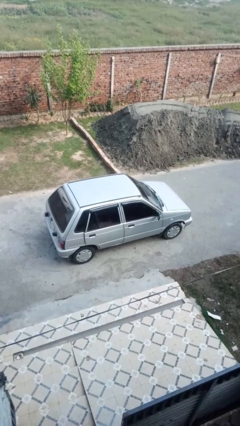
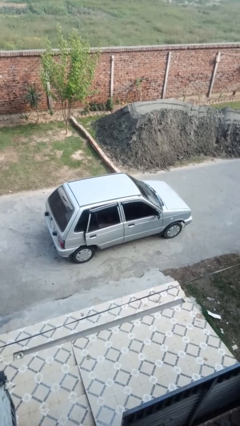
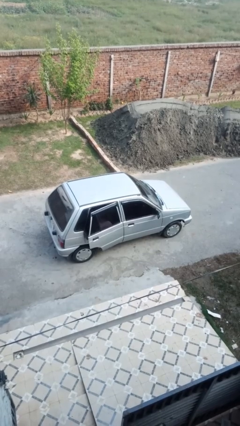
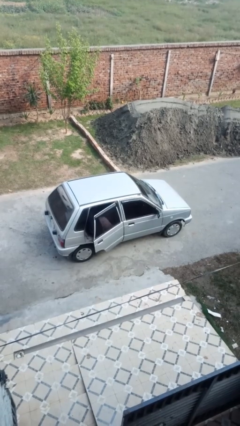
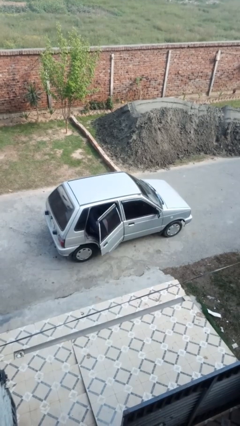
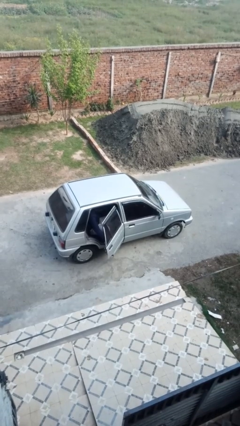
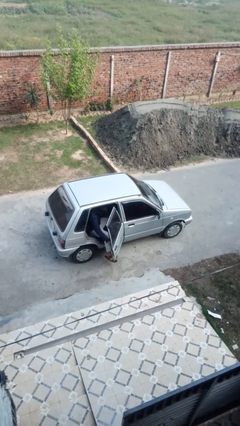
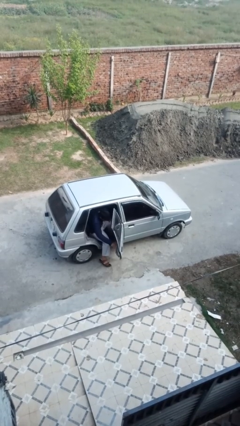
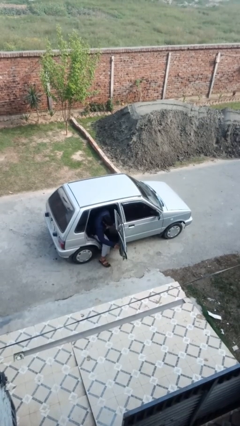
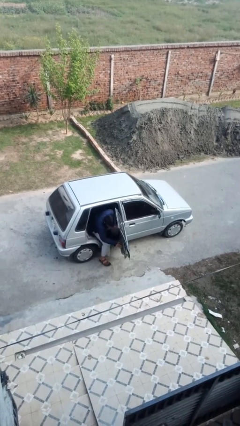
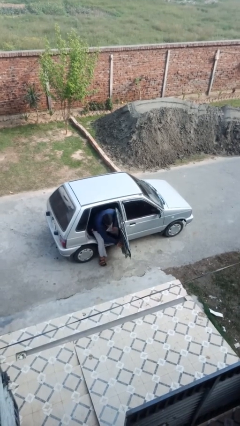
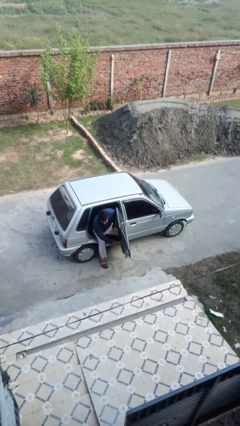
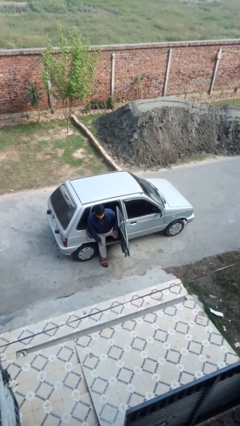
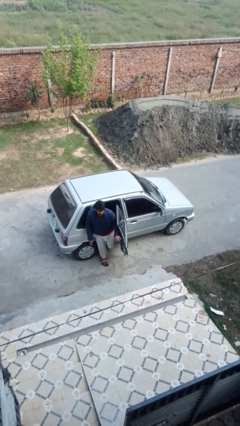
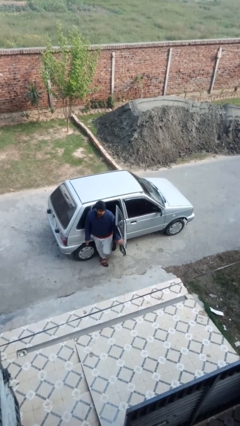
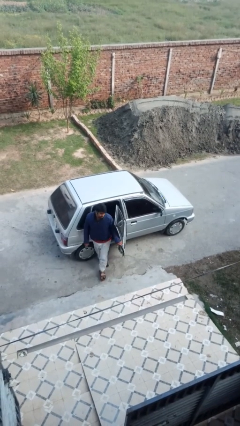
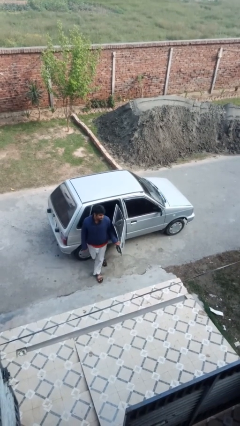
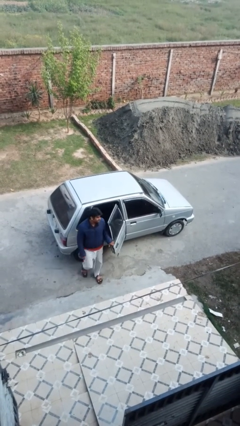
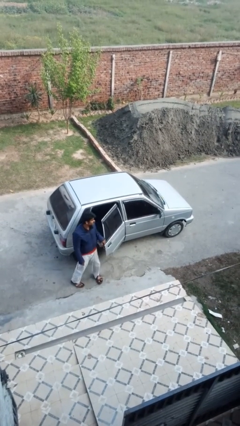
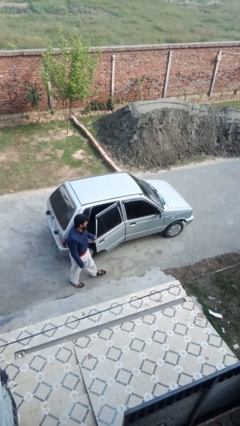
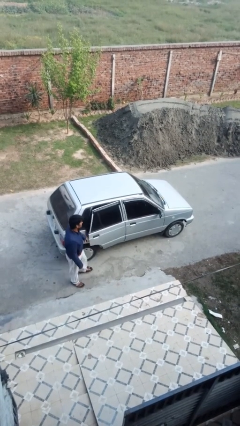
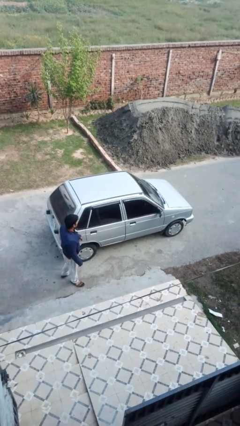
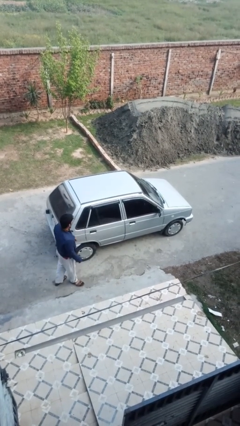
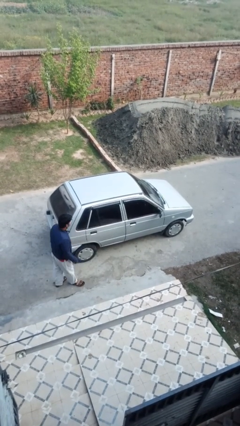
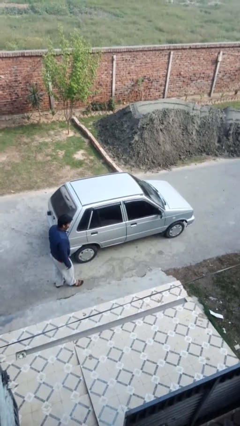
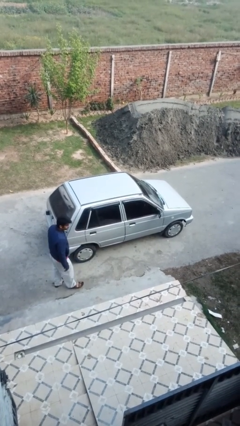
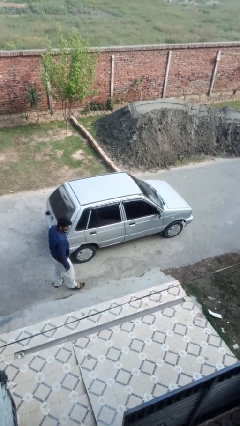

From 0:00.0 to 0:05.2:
car drops off person

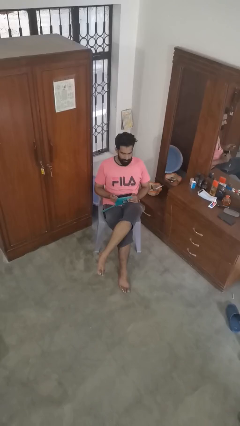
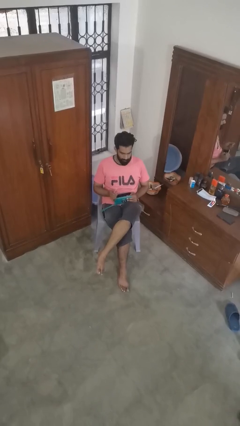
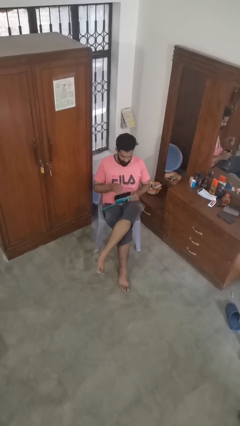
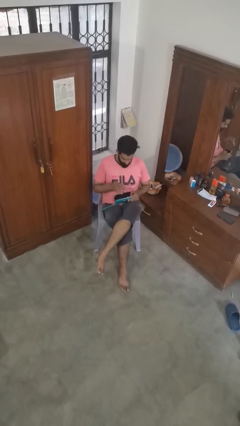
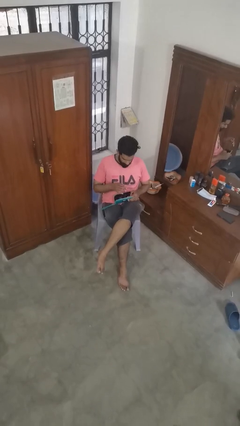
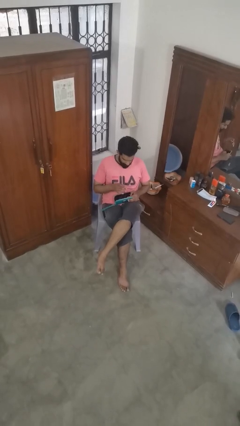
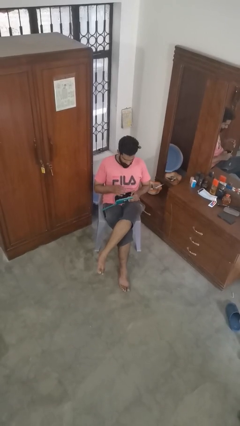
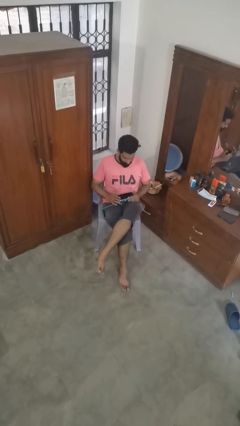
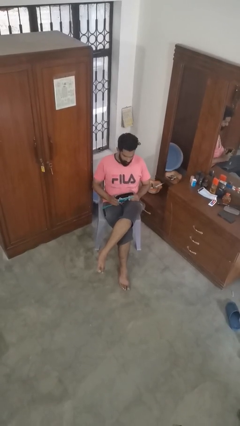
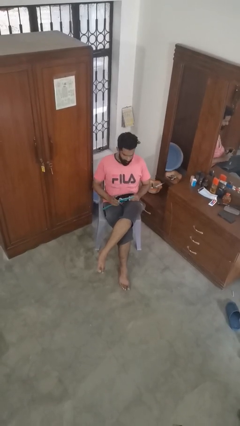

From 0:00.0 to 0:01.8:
person puts object into purse

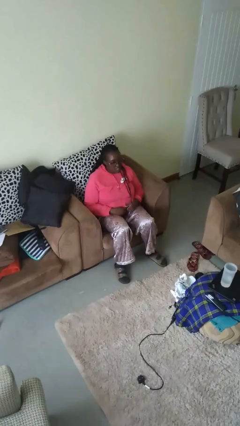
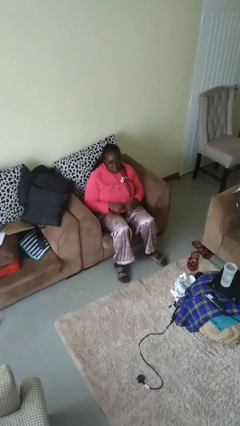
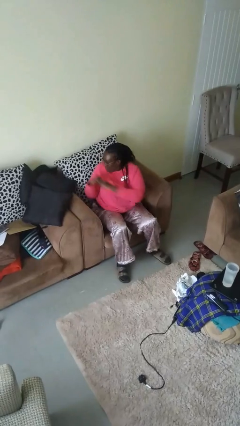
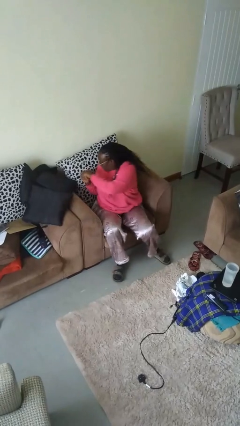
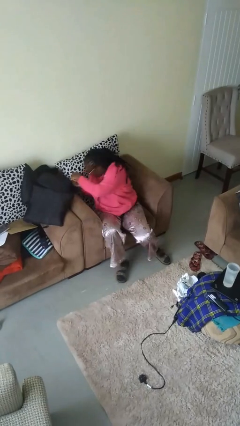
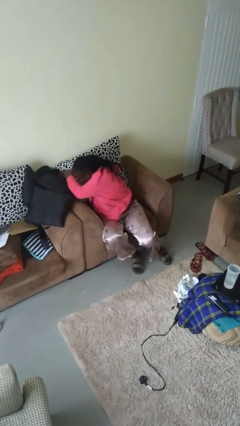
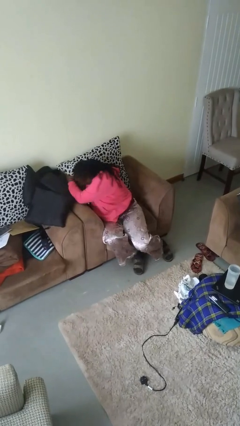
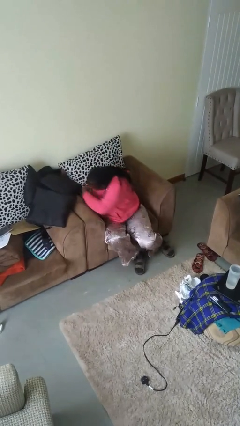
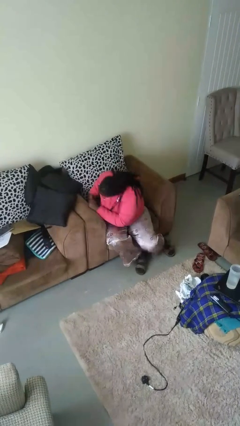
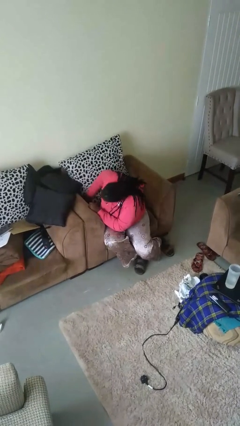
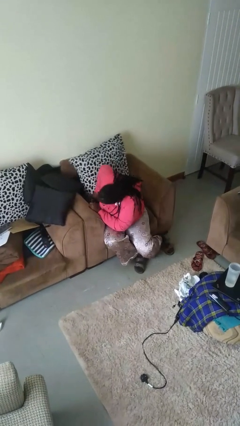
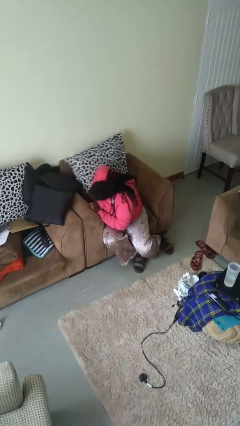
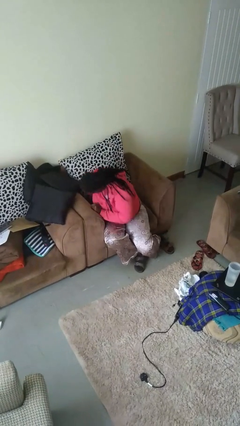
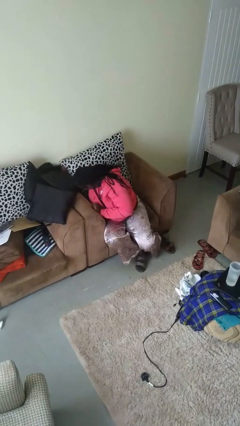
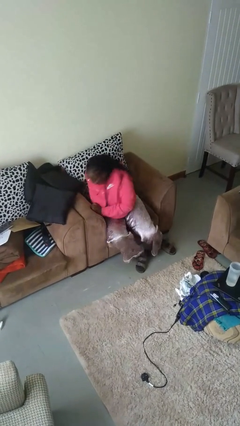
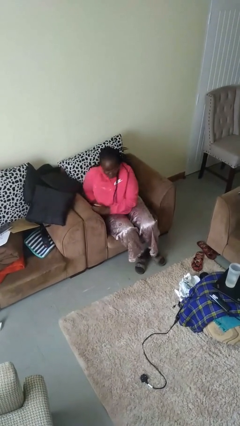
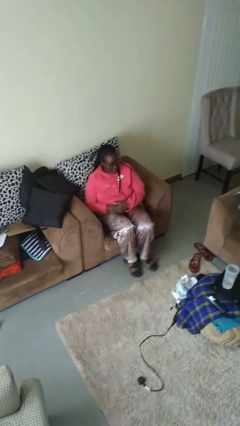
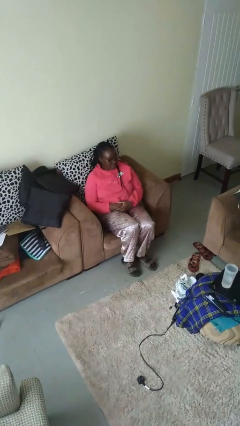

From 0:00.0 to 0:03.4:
person searches in couch

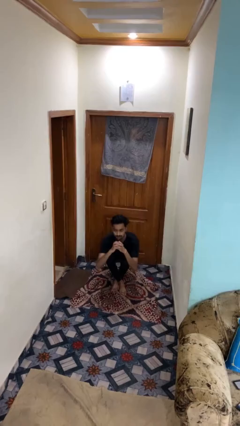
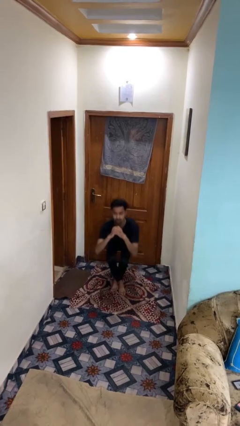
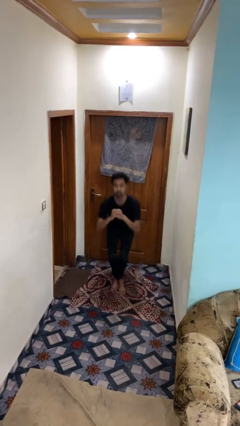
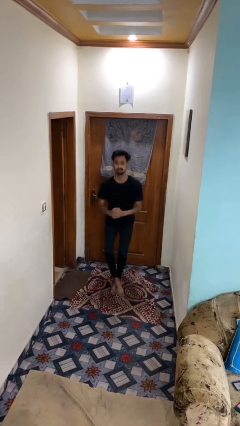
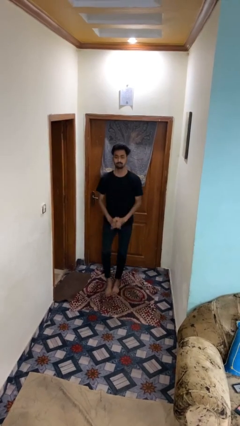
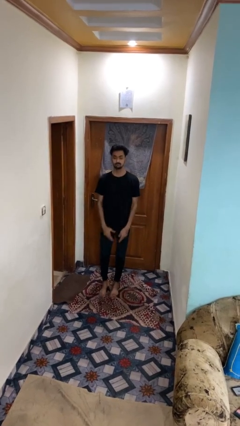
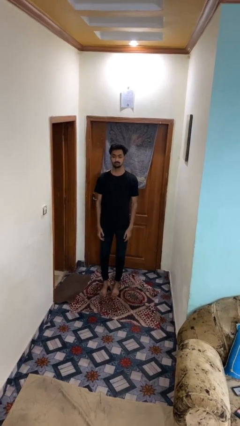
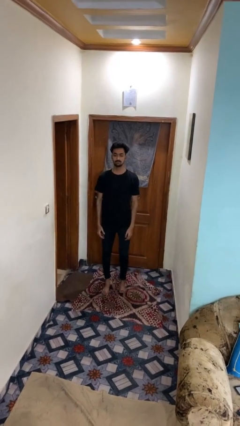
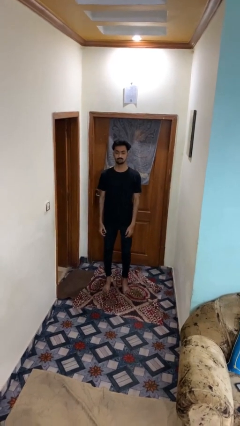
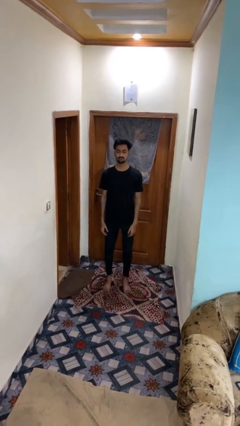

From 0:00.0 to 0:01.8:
person stands up from floor

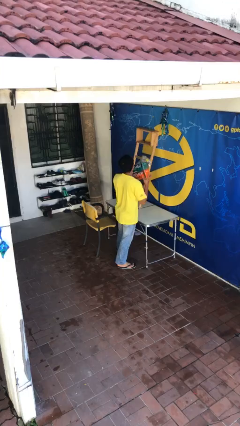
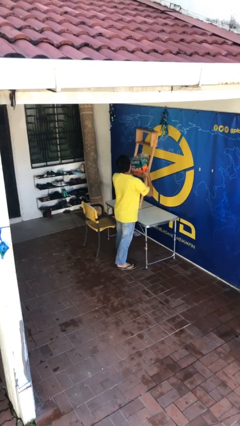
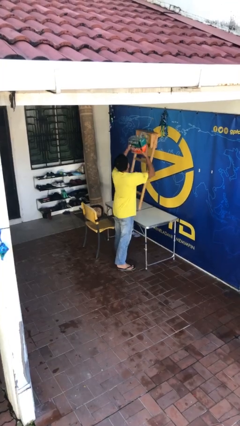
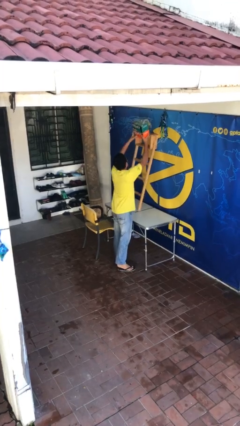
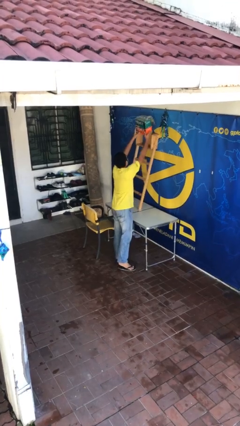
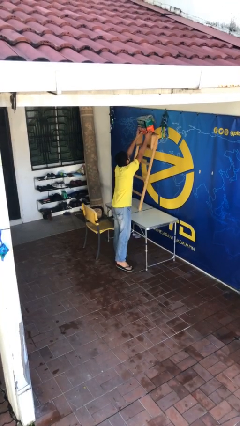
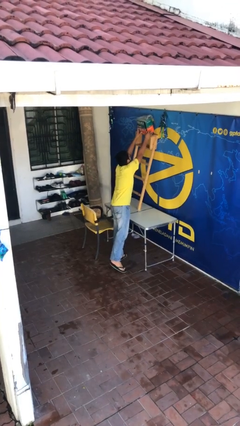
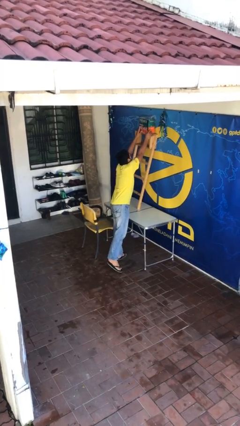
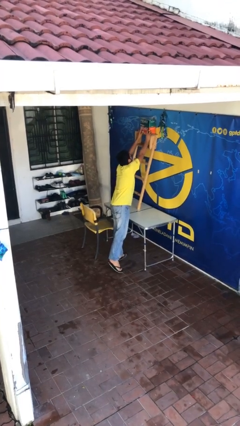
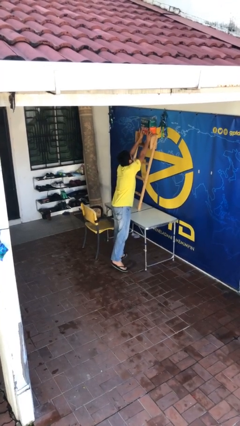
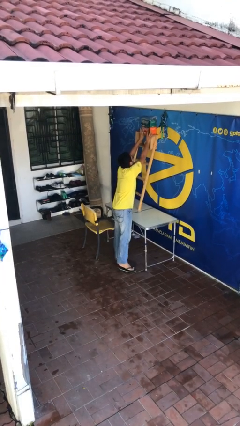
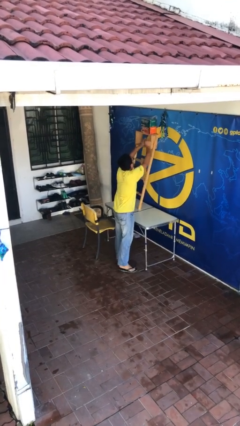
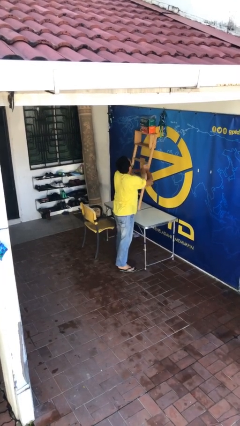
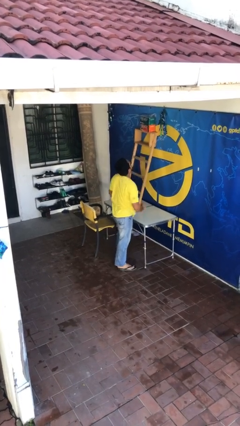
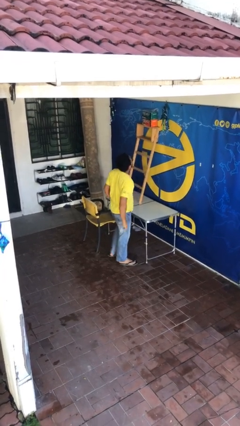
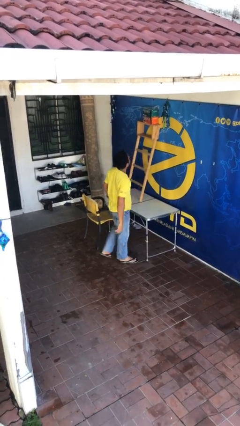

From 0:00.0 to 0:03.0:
person puts down object on shelf

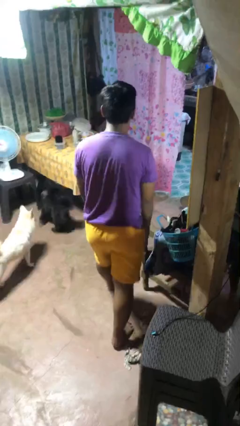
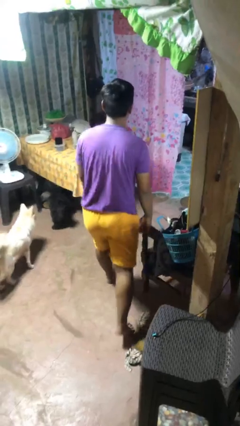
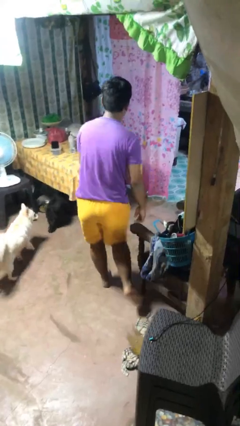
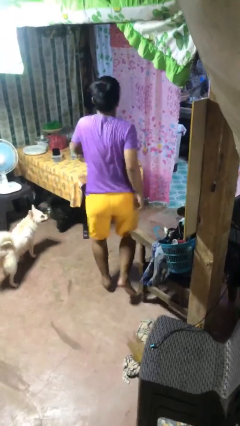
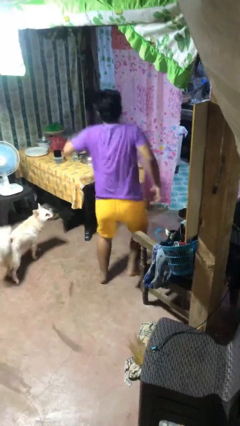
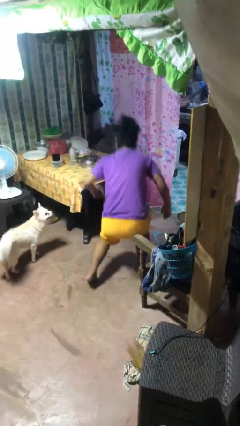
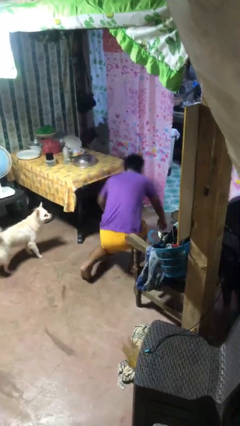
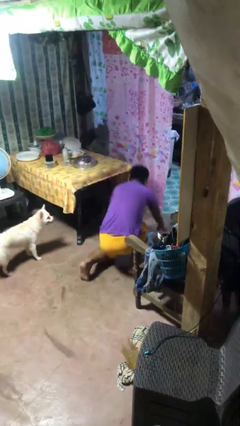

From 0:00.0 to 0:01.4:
person trips on object on floor

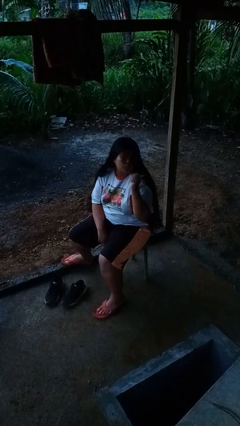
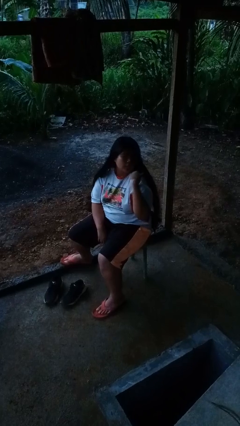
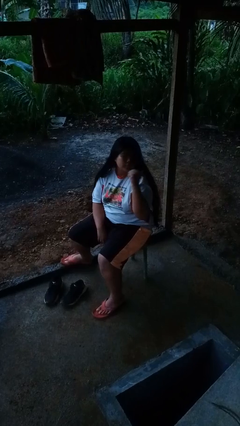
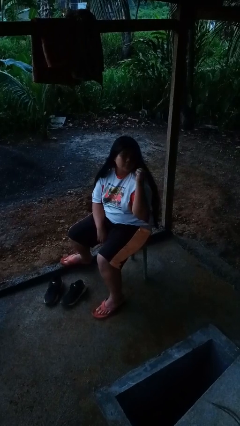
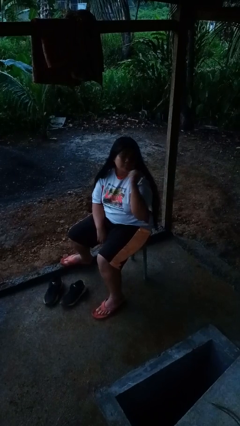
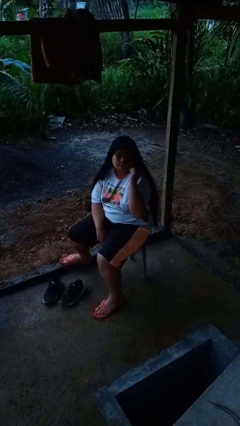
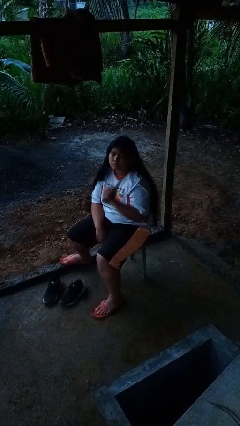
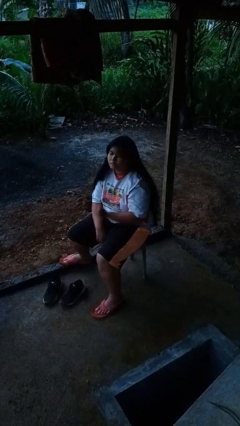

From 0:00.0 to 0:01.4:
person gestures behind me
